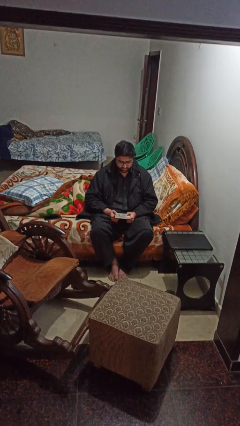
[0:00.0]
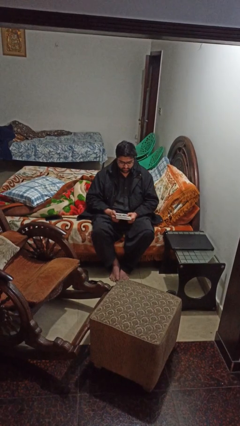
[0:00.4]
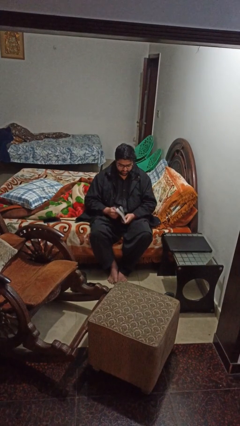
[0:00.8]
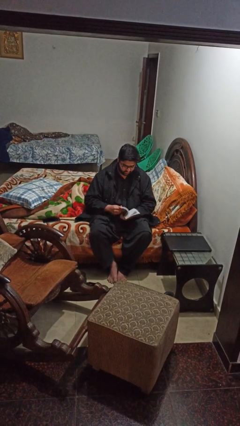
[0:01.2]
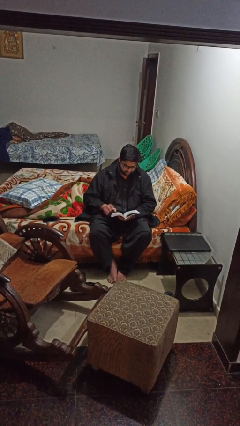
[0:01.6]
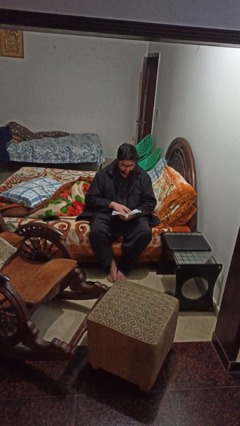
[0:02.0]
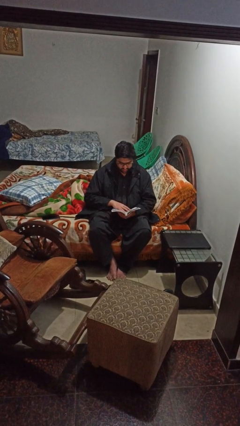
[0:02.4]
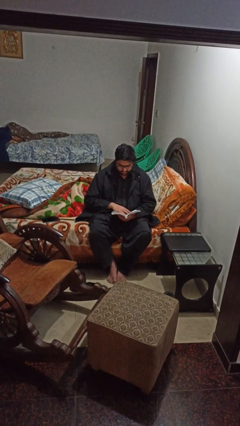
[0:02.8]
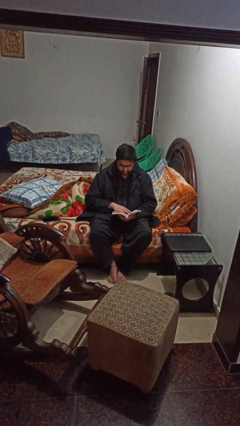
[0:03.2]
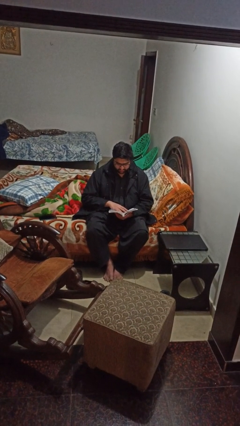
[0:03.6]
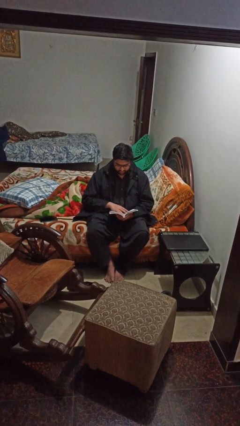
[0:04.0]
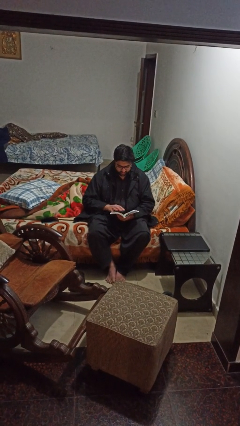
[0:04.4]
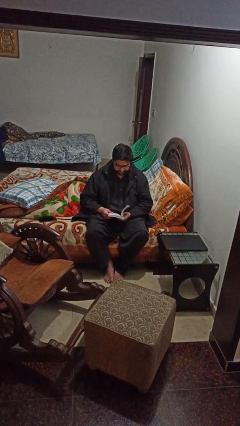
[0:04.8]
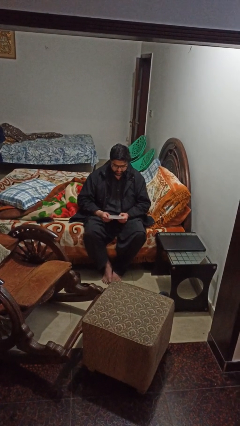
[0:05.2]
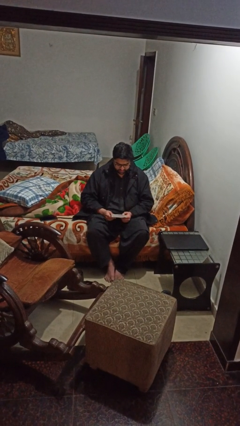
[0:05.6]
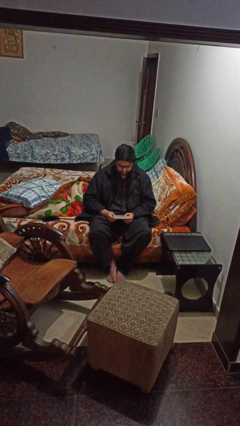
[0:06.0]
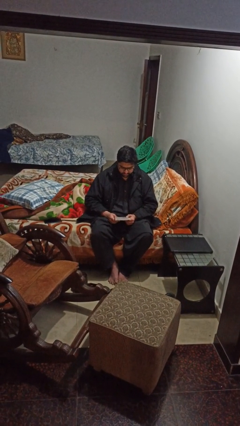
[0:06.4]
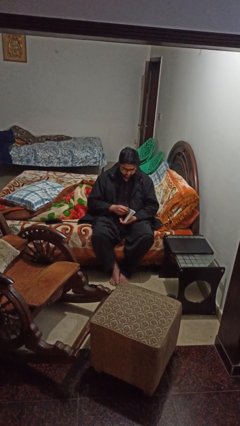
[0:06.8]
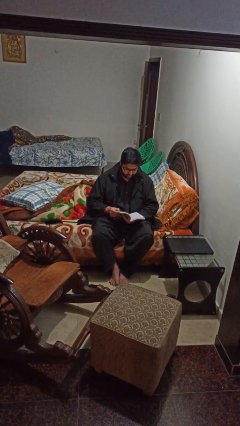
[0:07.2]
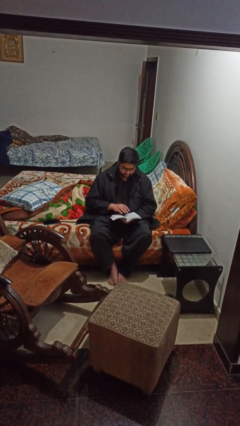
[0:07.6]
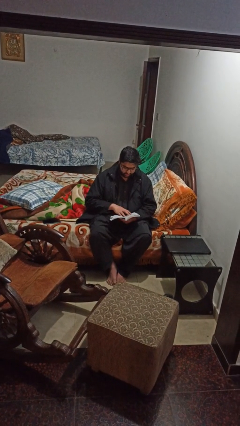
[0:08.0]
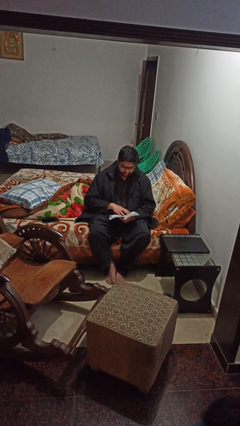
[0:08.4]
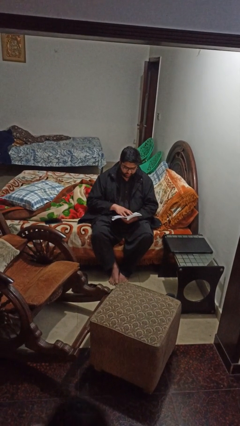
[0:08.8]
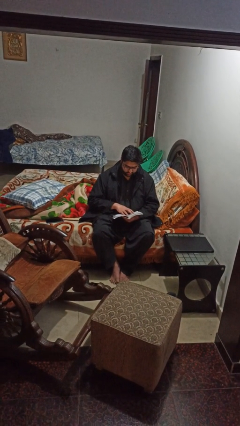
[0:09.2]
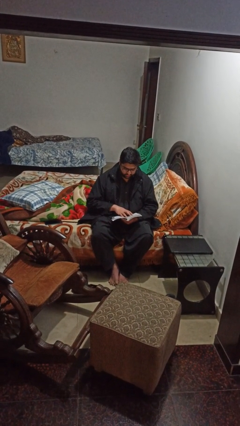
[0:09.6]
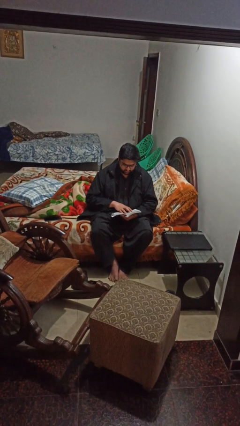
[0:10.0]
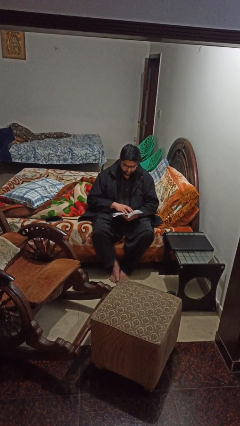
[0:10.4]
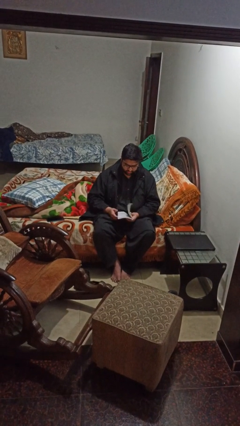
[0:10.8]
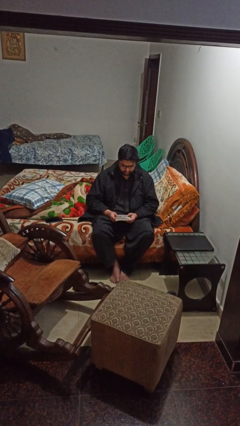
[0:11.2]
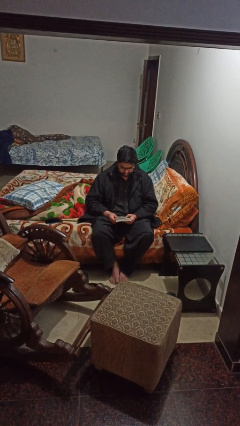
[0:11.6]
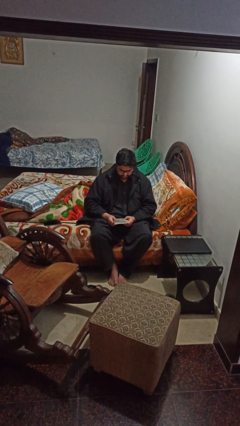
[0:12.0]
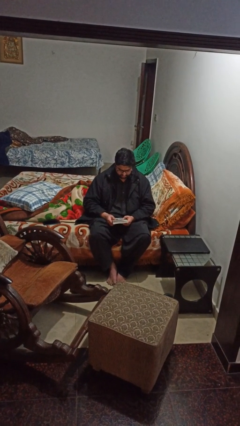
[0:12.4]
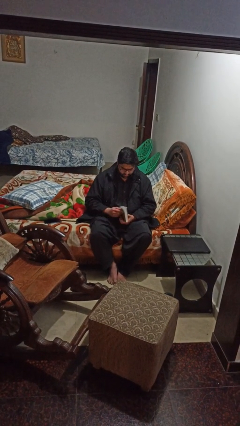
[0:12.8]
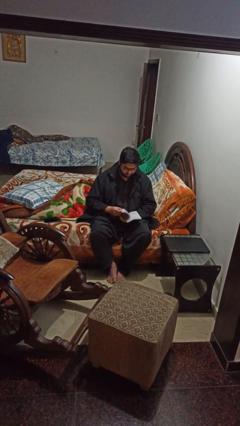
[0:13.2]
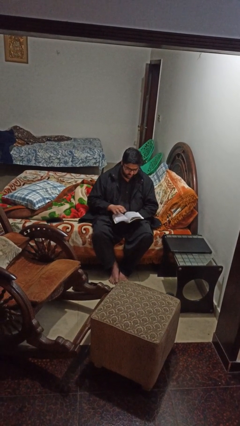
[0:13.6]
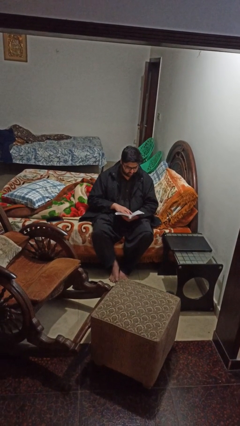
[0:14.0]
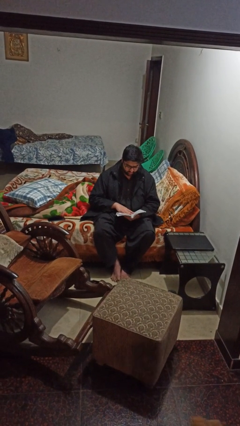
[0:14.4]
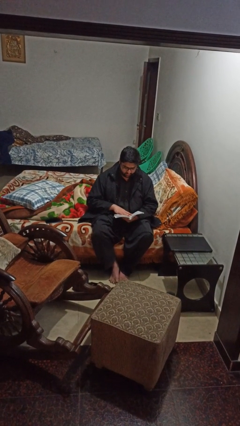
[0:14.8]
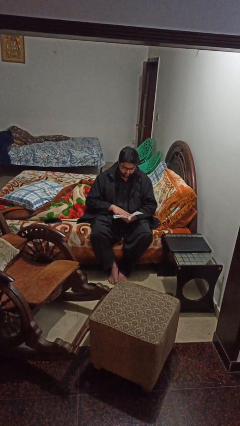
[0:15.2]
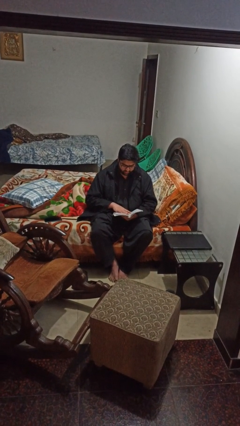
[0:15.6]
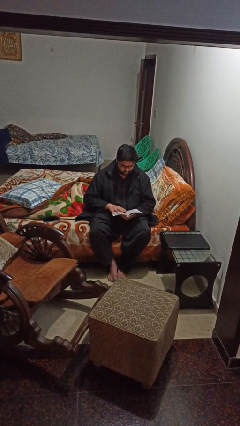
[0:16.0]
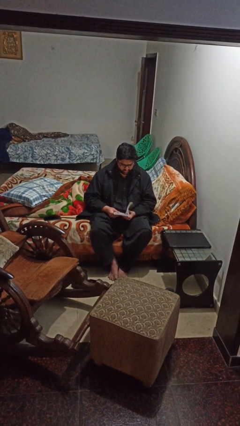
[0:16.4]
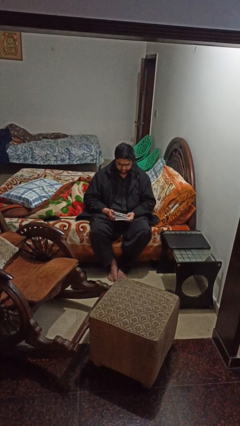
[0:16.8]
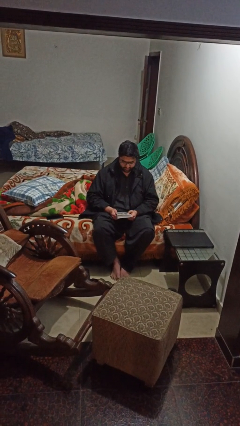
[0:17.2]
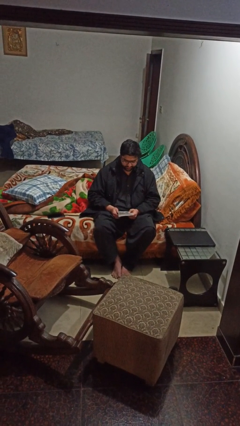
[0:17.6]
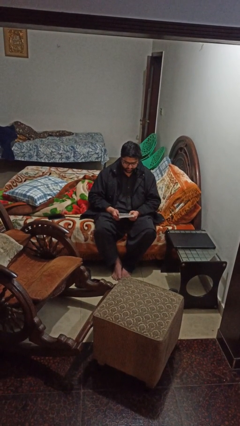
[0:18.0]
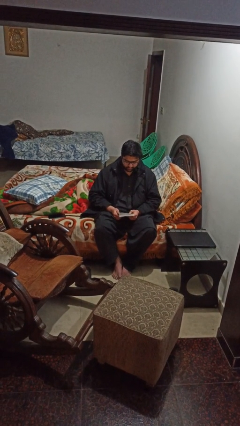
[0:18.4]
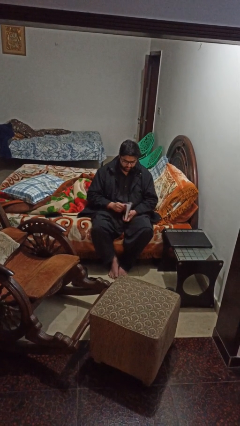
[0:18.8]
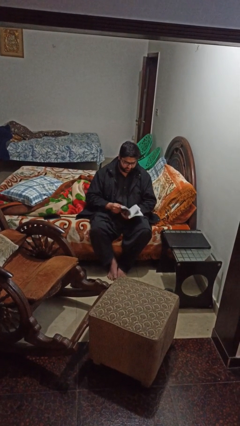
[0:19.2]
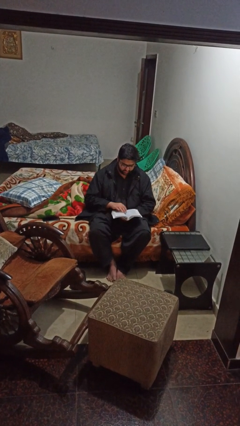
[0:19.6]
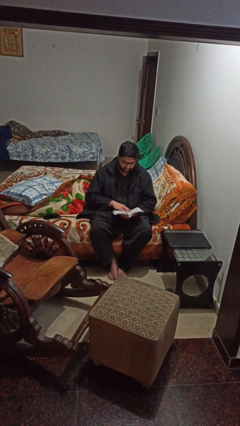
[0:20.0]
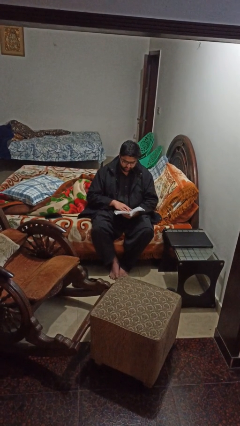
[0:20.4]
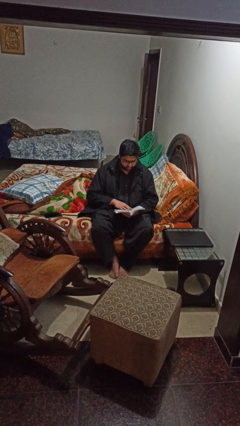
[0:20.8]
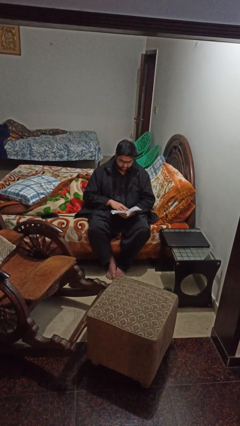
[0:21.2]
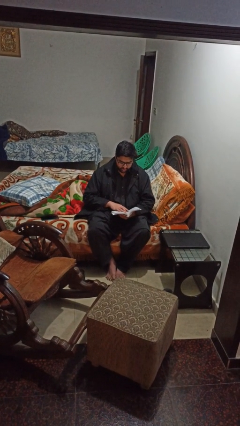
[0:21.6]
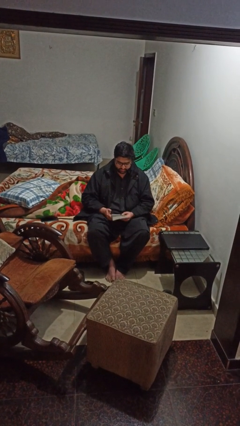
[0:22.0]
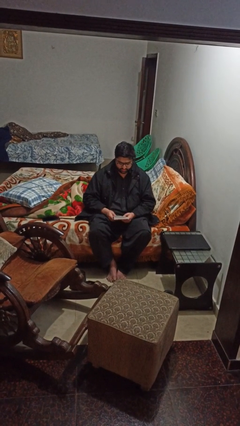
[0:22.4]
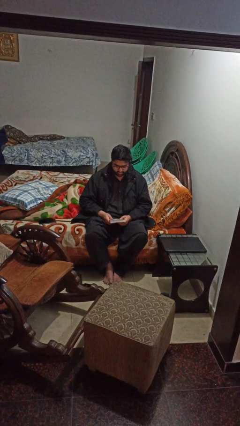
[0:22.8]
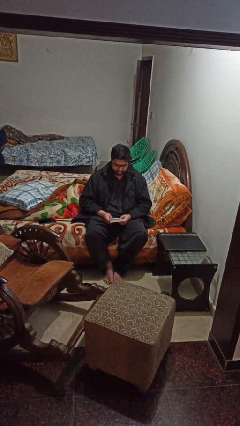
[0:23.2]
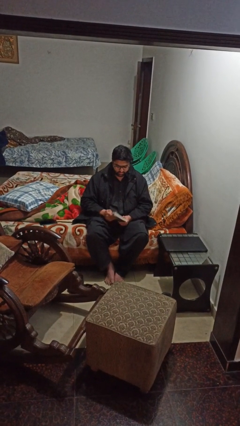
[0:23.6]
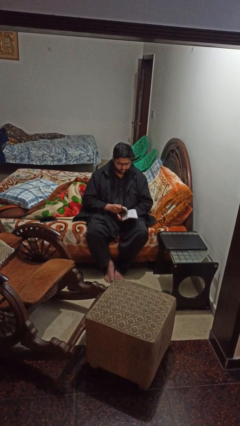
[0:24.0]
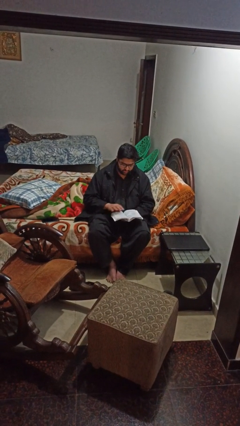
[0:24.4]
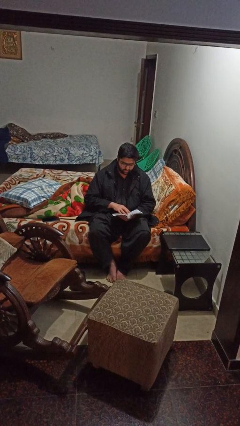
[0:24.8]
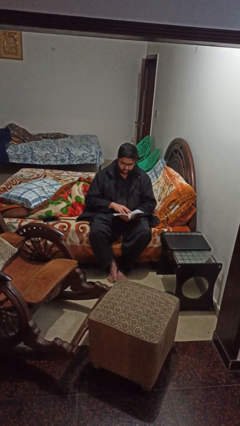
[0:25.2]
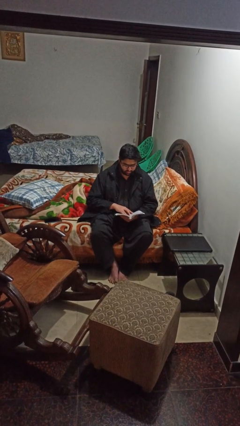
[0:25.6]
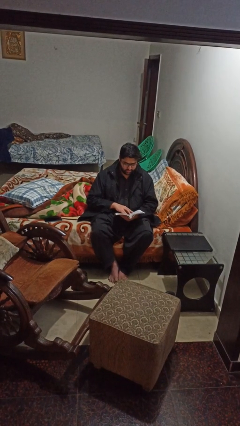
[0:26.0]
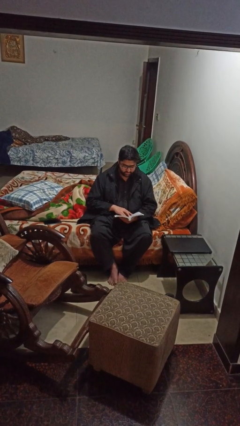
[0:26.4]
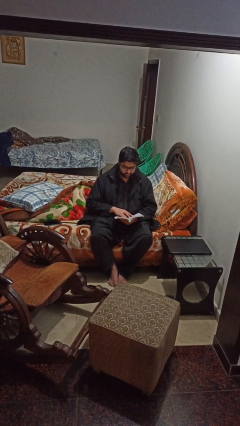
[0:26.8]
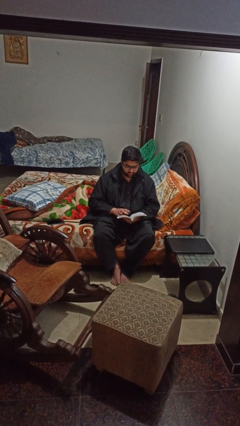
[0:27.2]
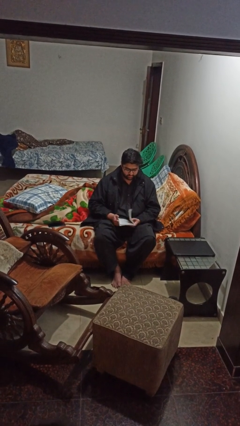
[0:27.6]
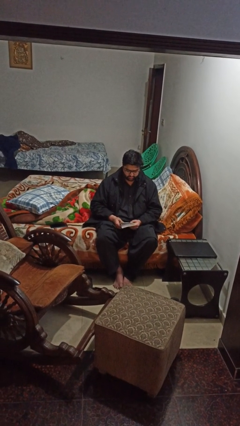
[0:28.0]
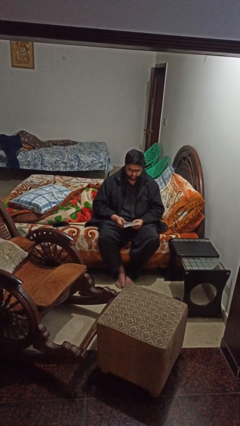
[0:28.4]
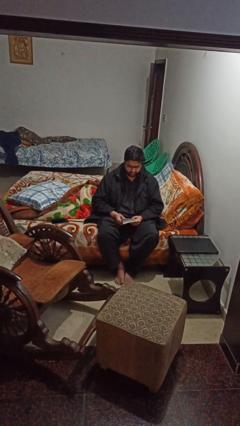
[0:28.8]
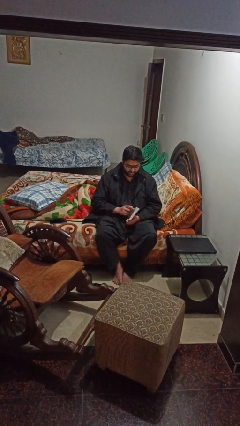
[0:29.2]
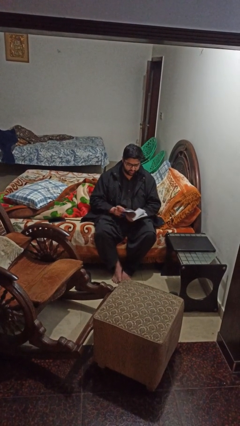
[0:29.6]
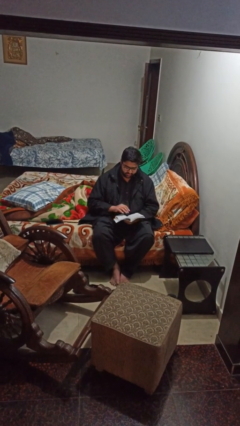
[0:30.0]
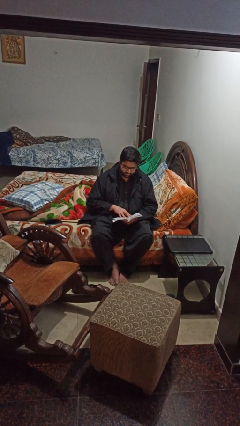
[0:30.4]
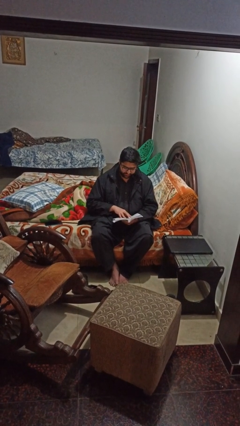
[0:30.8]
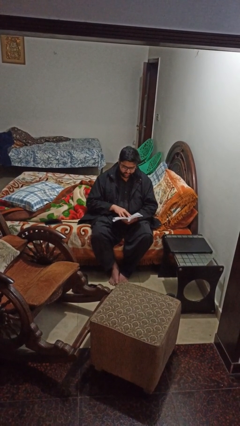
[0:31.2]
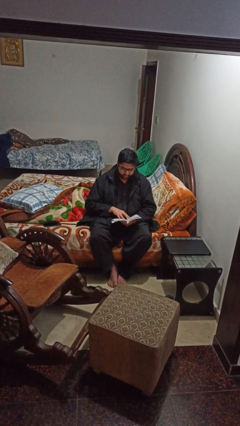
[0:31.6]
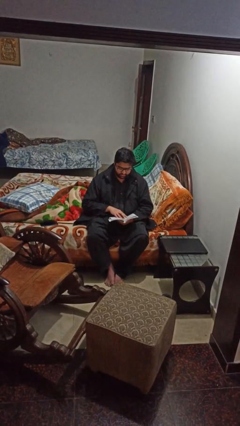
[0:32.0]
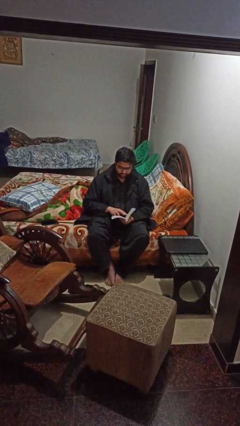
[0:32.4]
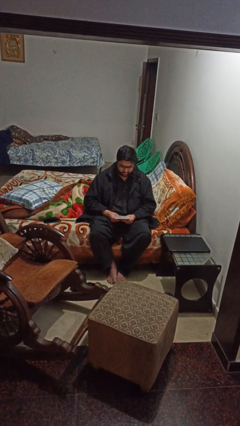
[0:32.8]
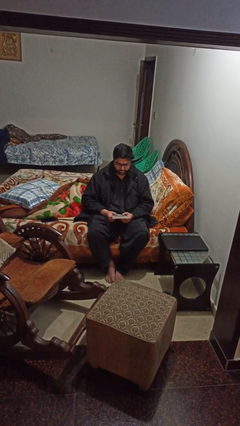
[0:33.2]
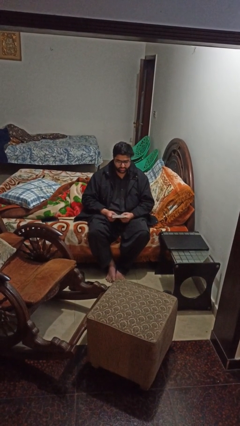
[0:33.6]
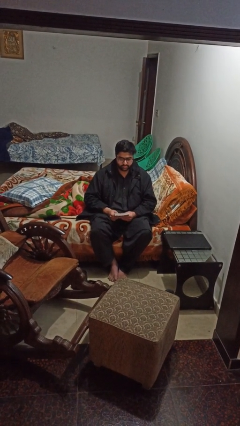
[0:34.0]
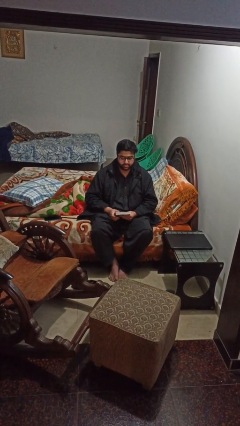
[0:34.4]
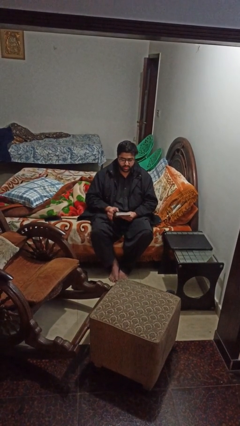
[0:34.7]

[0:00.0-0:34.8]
person reads document

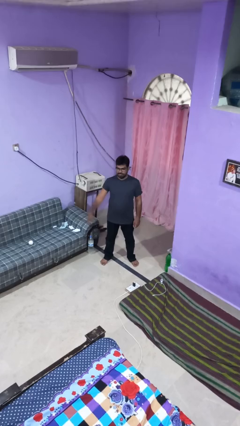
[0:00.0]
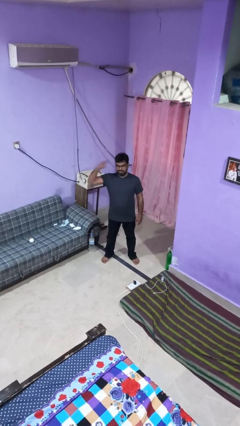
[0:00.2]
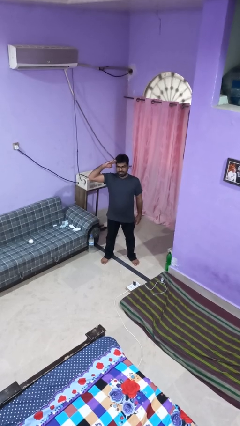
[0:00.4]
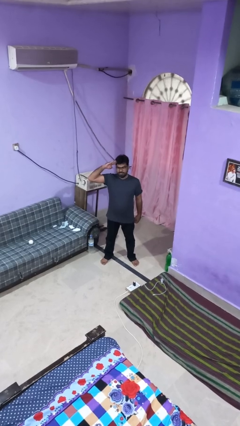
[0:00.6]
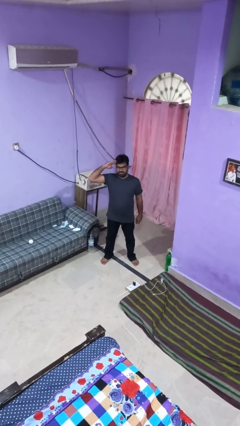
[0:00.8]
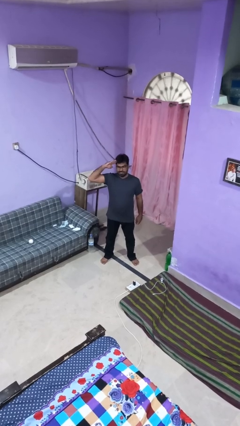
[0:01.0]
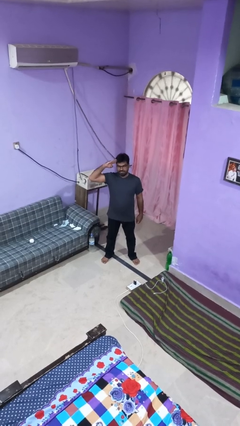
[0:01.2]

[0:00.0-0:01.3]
person salutes
